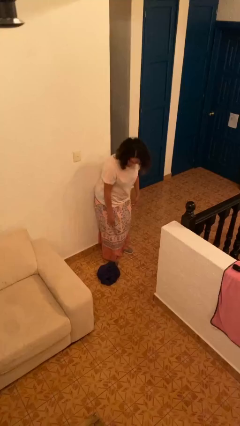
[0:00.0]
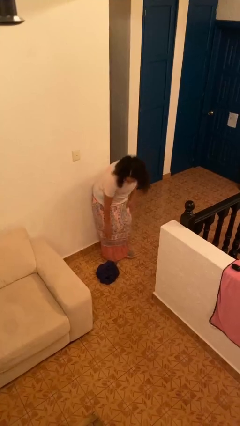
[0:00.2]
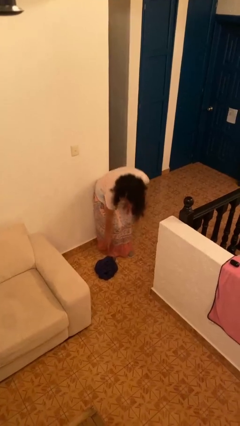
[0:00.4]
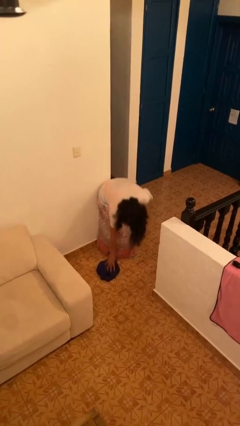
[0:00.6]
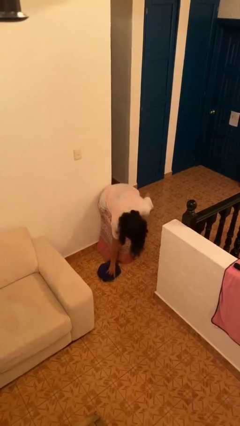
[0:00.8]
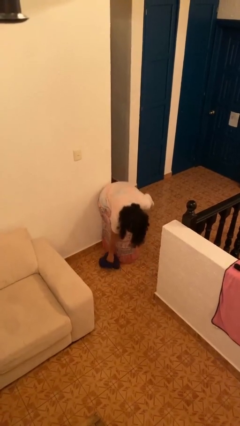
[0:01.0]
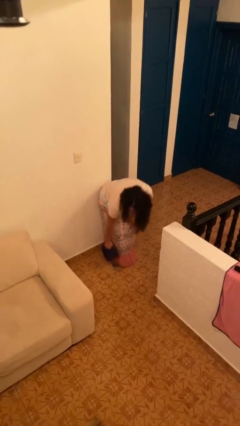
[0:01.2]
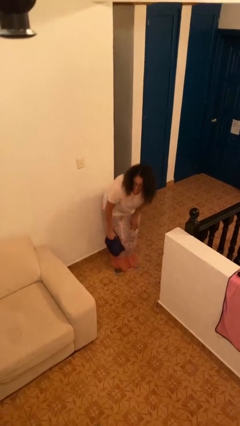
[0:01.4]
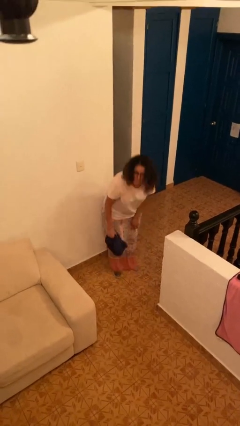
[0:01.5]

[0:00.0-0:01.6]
person picks up object from floor

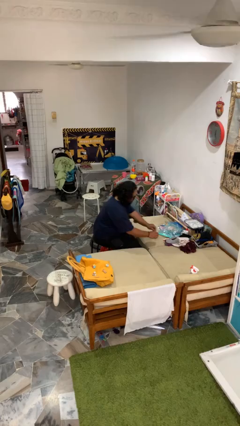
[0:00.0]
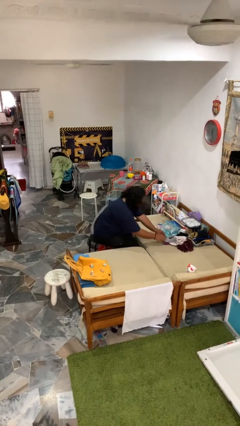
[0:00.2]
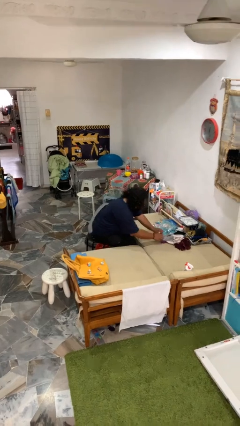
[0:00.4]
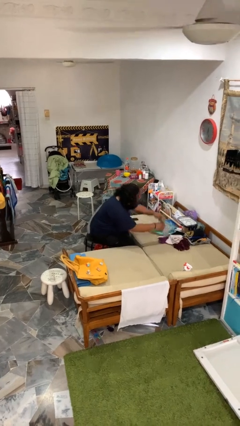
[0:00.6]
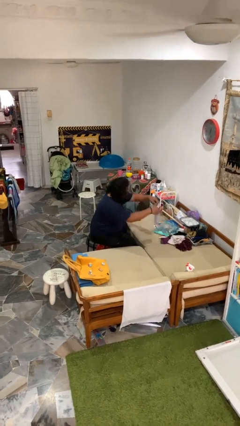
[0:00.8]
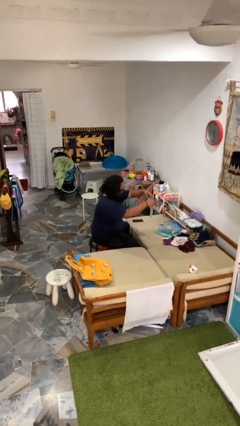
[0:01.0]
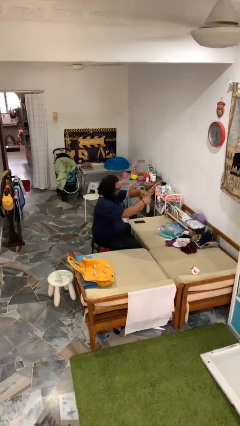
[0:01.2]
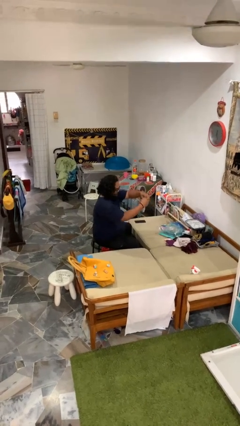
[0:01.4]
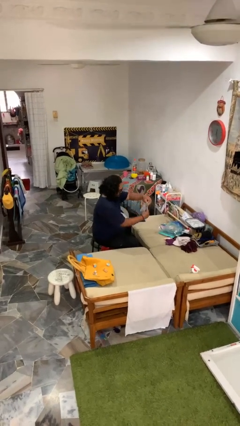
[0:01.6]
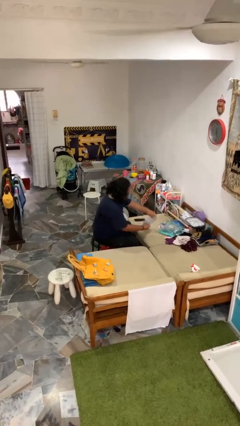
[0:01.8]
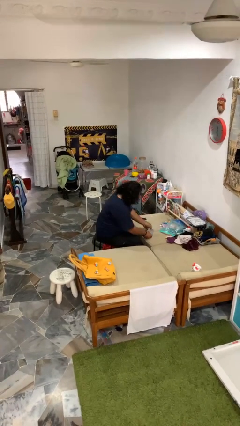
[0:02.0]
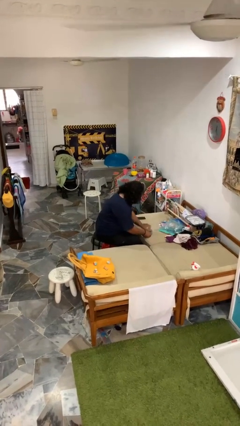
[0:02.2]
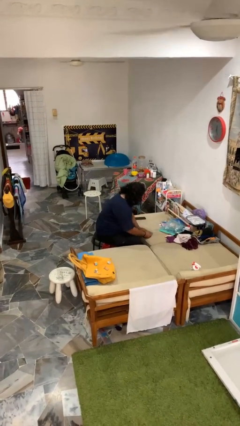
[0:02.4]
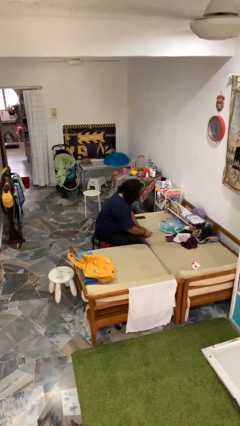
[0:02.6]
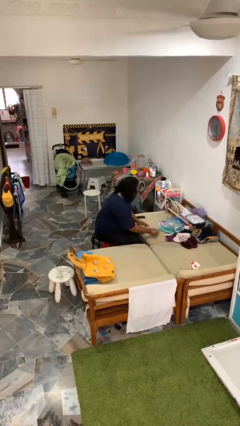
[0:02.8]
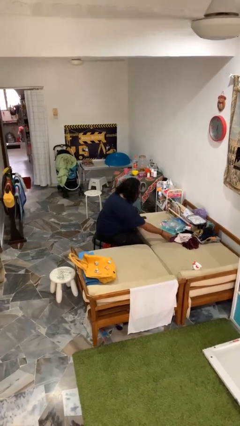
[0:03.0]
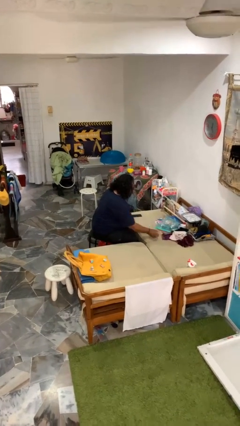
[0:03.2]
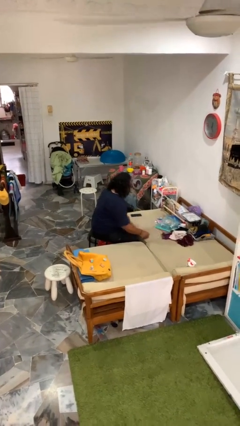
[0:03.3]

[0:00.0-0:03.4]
person folds socks

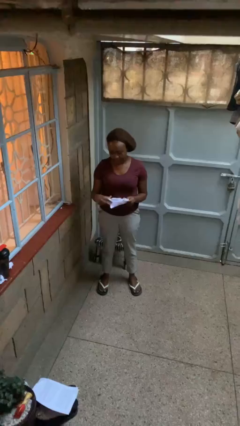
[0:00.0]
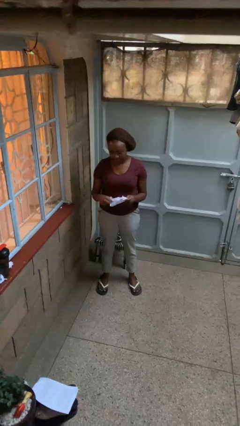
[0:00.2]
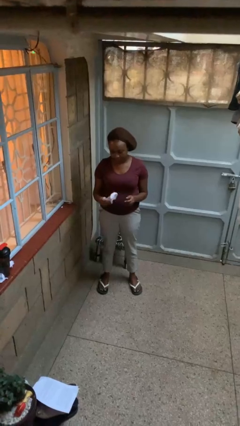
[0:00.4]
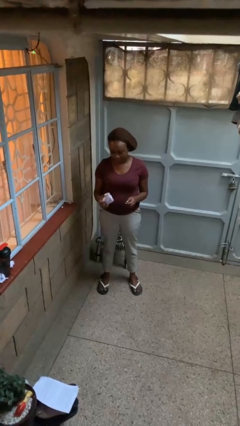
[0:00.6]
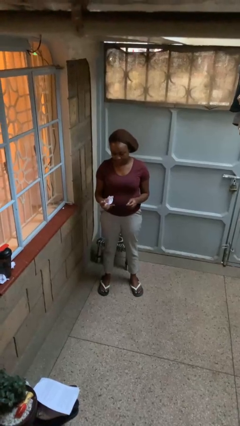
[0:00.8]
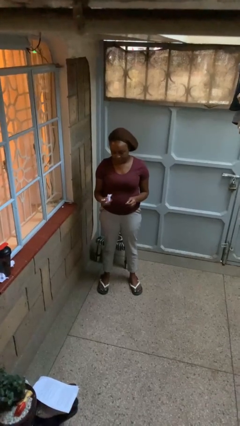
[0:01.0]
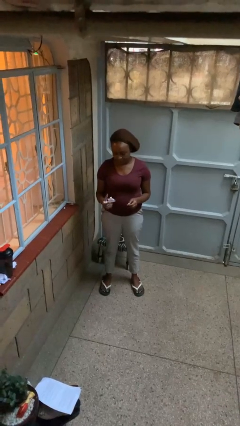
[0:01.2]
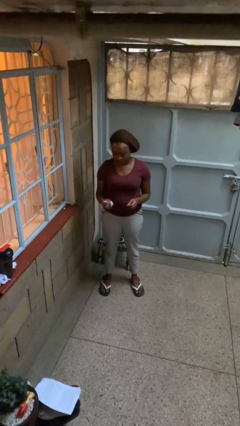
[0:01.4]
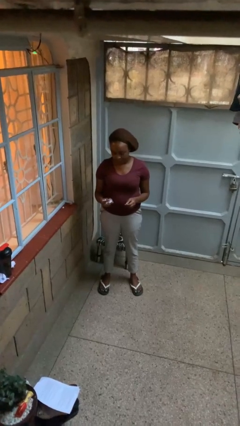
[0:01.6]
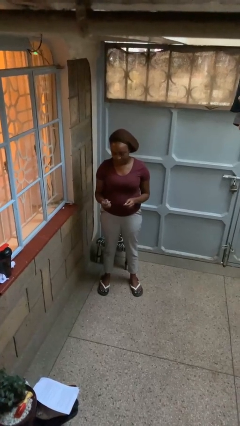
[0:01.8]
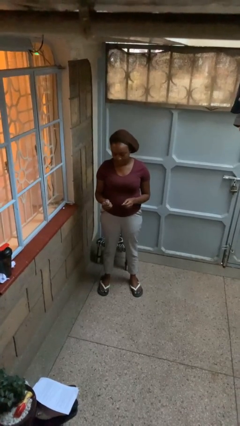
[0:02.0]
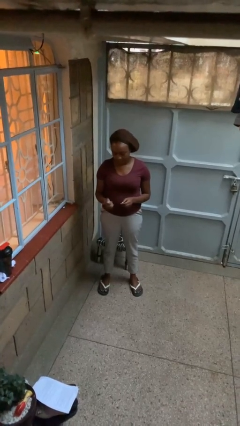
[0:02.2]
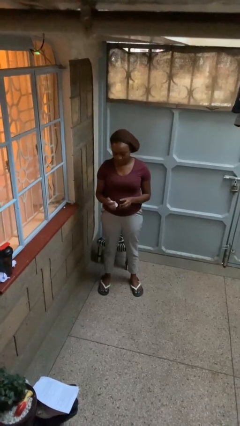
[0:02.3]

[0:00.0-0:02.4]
person crumples paper

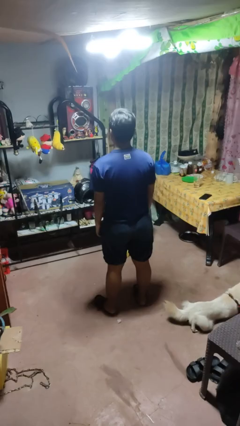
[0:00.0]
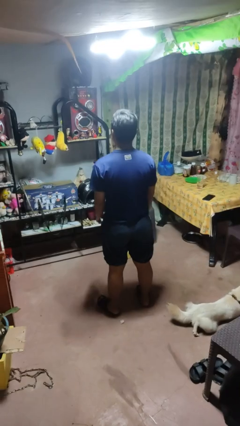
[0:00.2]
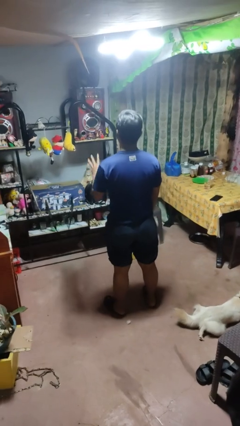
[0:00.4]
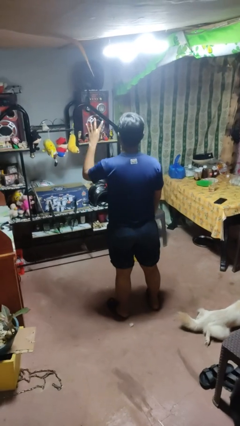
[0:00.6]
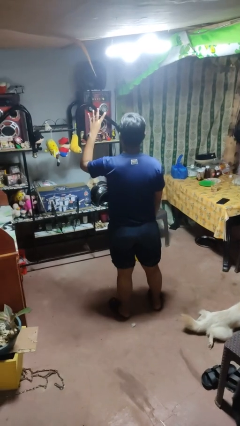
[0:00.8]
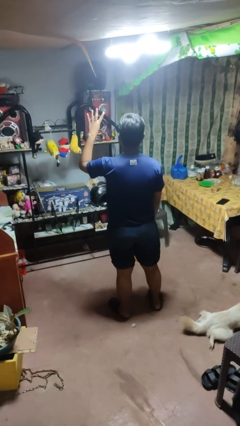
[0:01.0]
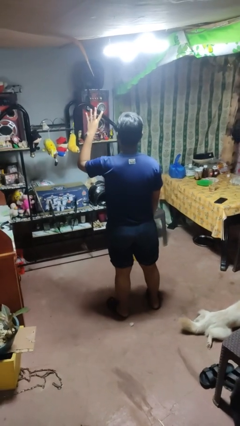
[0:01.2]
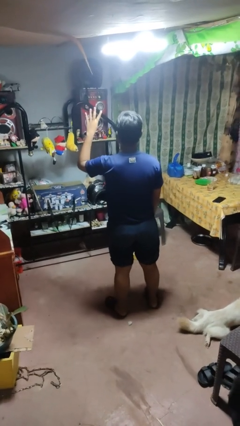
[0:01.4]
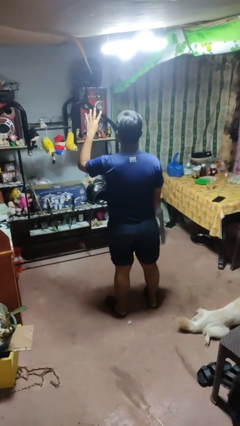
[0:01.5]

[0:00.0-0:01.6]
person gestures number four

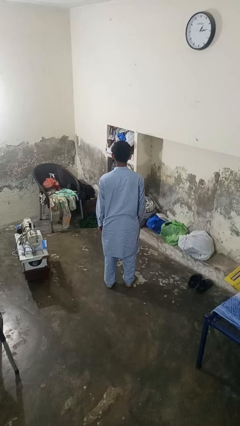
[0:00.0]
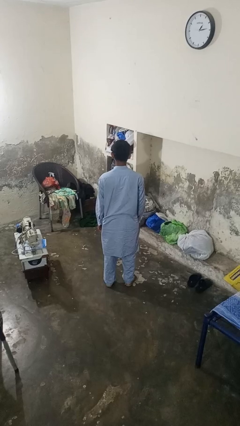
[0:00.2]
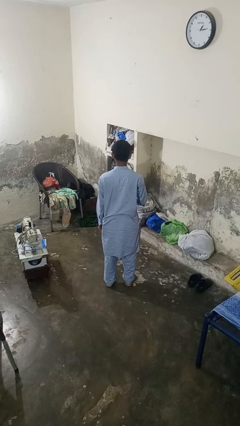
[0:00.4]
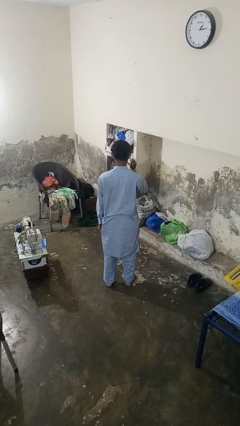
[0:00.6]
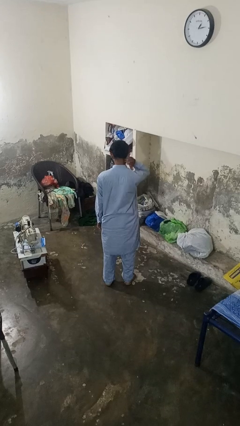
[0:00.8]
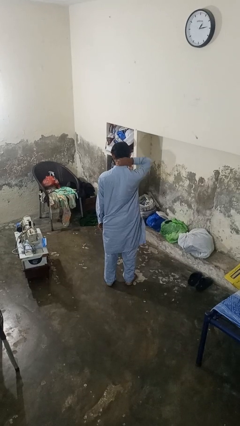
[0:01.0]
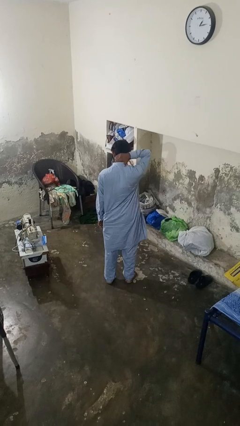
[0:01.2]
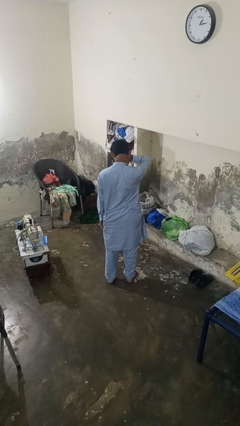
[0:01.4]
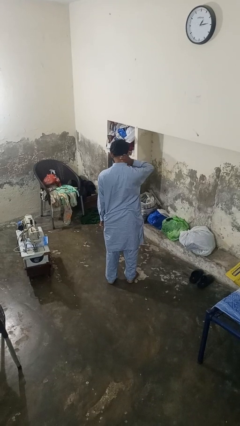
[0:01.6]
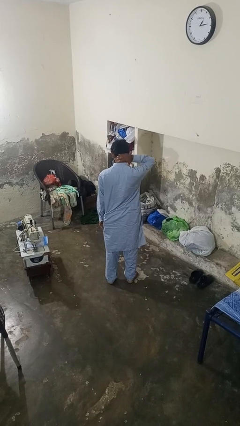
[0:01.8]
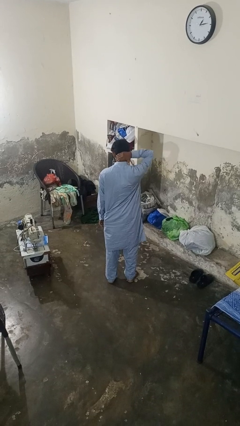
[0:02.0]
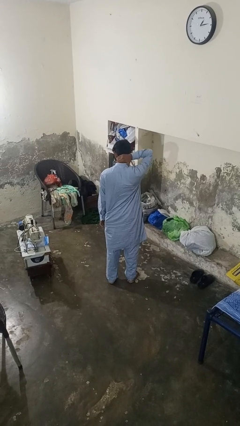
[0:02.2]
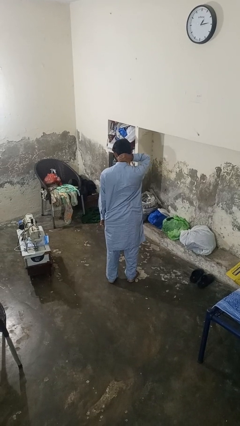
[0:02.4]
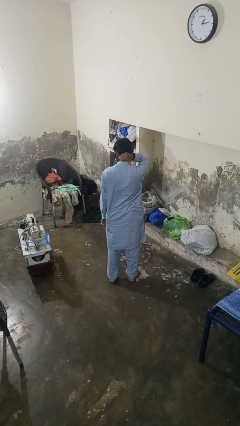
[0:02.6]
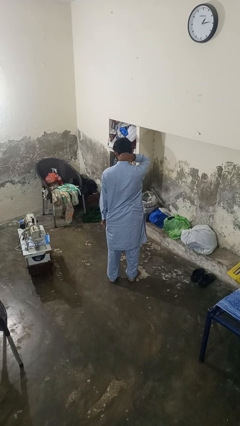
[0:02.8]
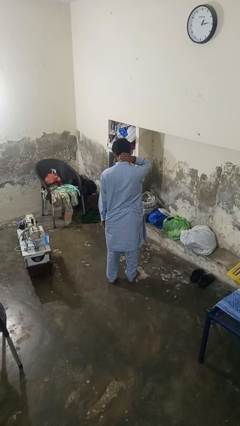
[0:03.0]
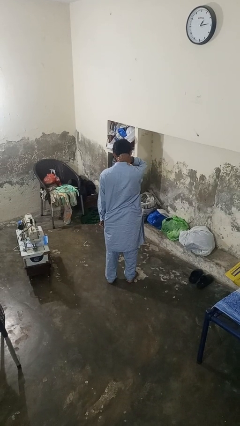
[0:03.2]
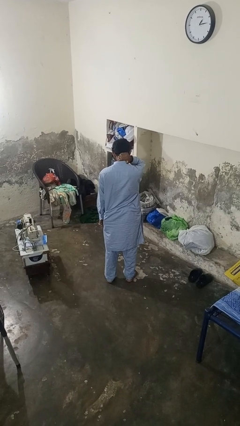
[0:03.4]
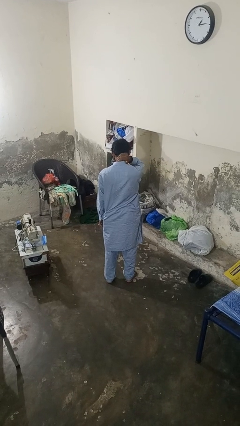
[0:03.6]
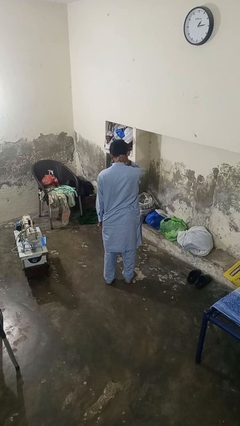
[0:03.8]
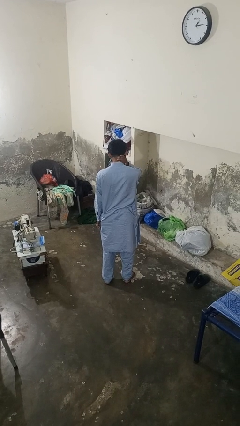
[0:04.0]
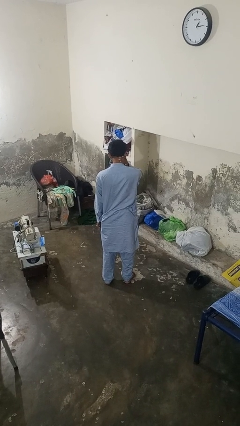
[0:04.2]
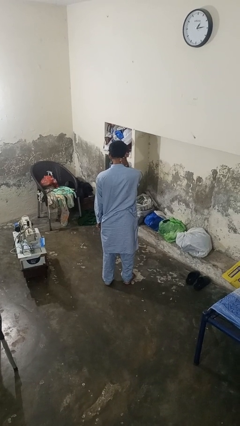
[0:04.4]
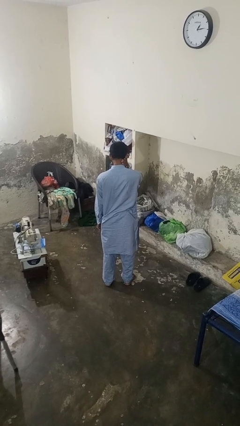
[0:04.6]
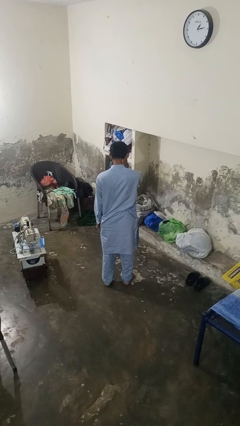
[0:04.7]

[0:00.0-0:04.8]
person rubs neck

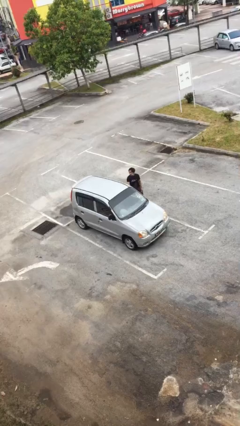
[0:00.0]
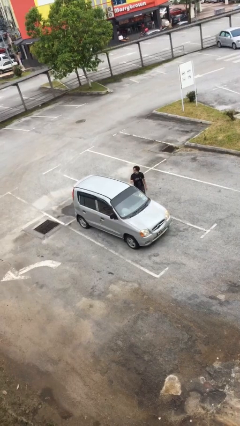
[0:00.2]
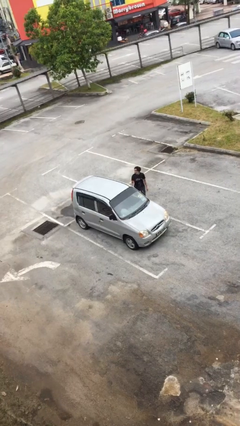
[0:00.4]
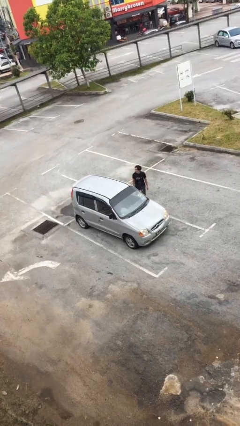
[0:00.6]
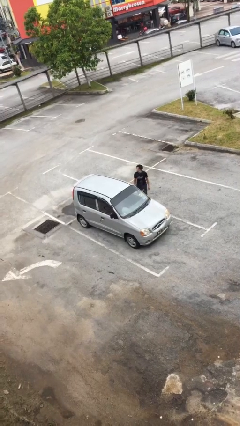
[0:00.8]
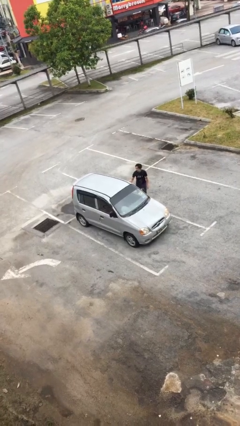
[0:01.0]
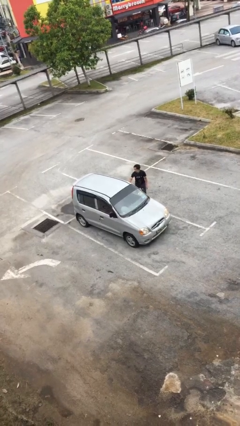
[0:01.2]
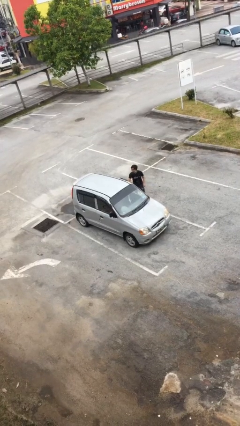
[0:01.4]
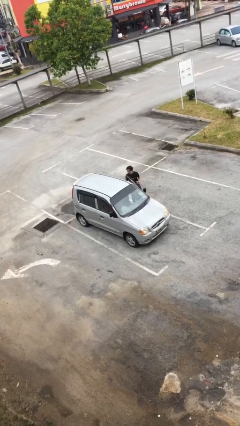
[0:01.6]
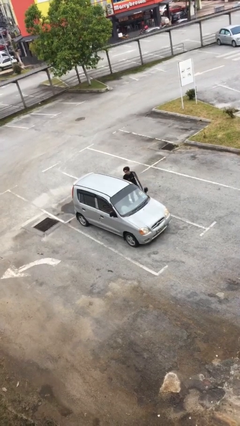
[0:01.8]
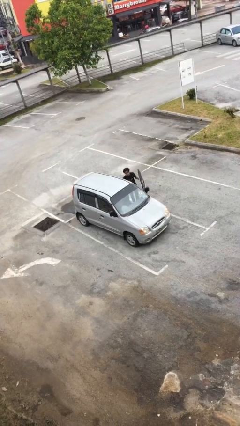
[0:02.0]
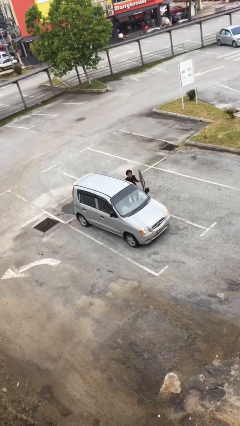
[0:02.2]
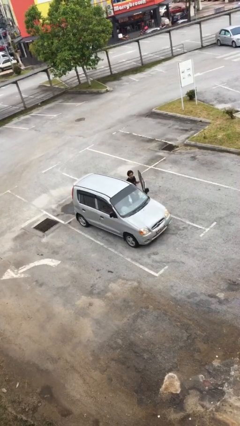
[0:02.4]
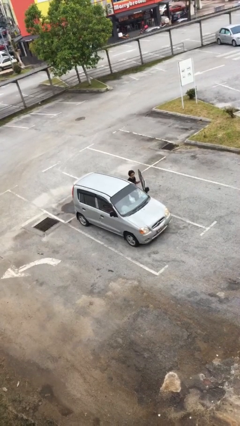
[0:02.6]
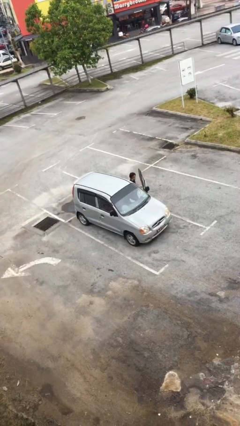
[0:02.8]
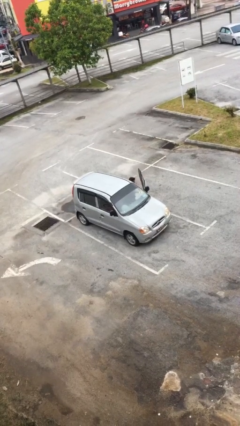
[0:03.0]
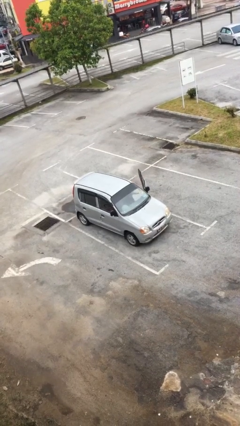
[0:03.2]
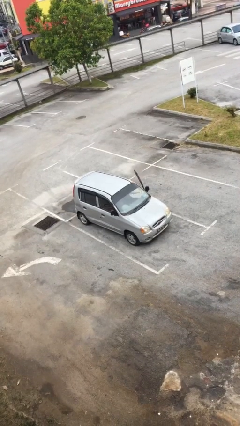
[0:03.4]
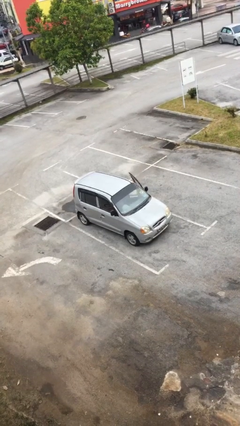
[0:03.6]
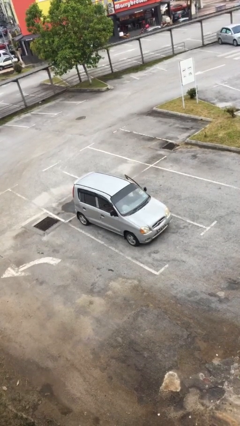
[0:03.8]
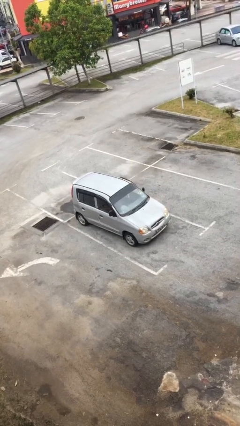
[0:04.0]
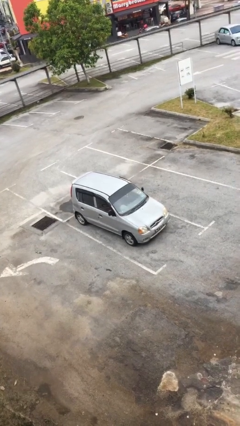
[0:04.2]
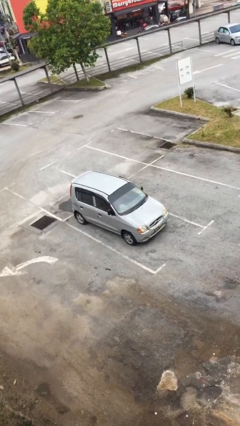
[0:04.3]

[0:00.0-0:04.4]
car picks up person
